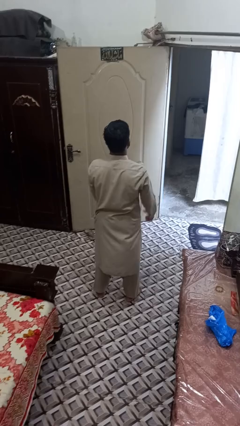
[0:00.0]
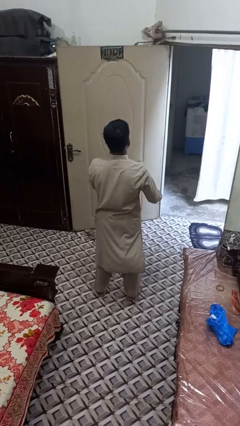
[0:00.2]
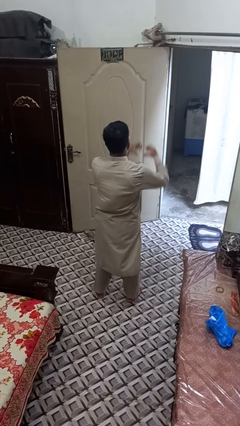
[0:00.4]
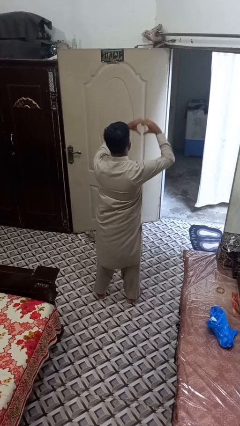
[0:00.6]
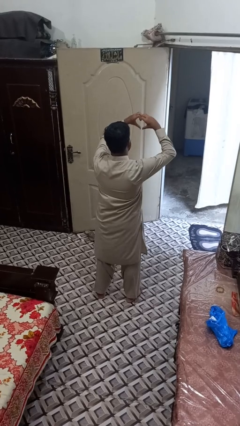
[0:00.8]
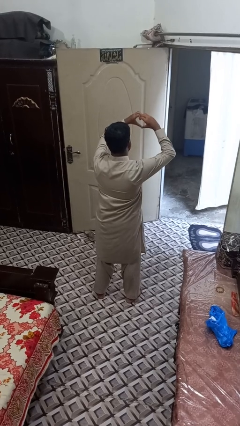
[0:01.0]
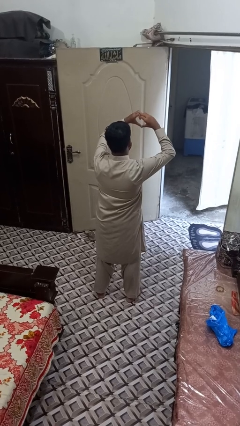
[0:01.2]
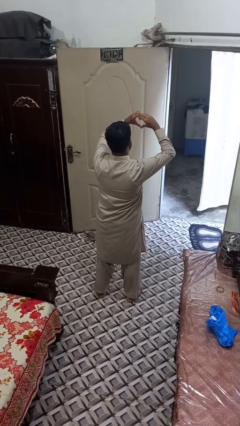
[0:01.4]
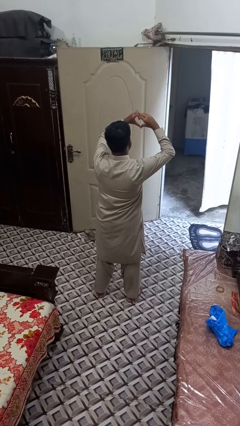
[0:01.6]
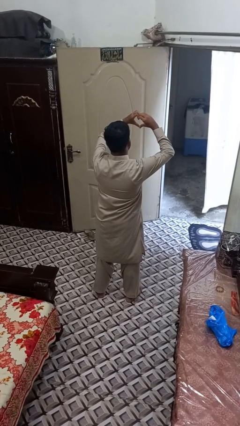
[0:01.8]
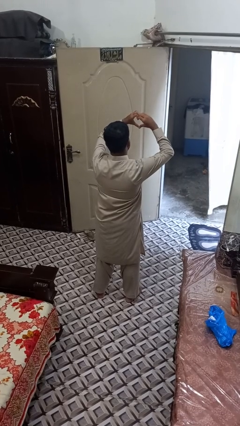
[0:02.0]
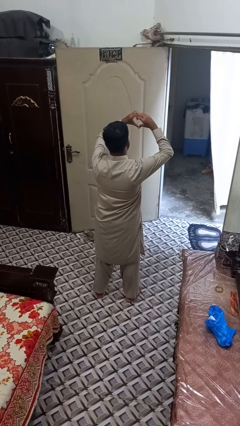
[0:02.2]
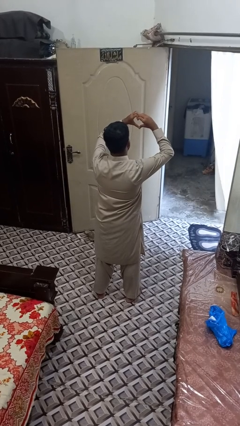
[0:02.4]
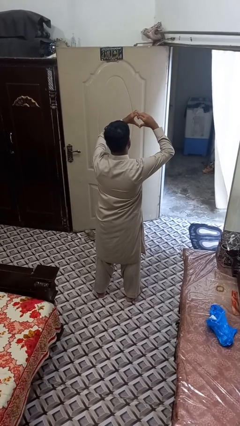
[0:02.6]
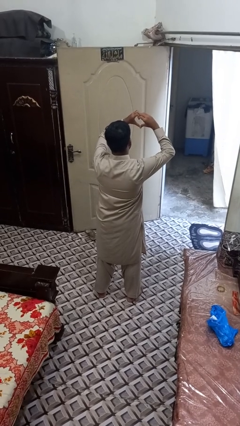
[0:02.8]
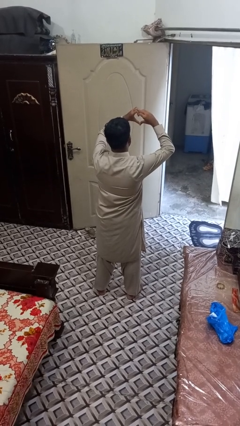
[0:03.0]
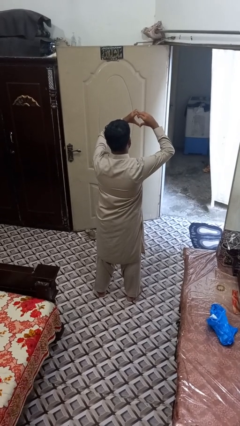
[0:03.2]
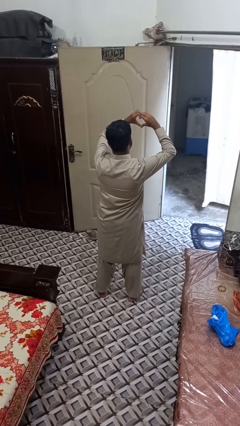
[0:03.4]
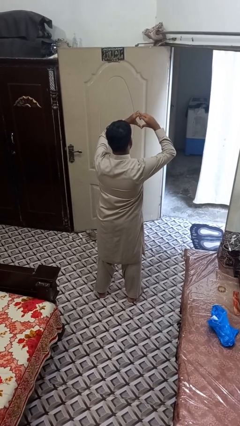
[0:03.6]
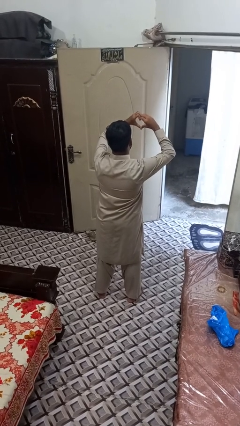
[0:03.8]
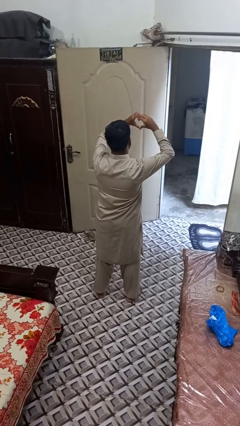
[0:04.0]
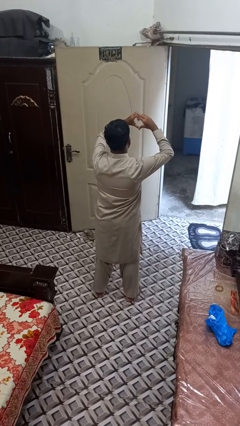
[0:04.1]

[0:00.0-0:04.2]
person gestures heart

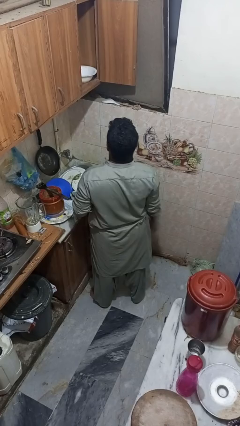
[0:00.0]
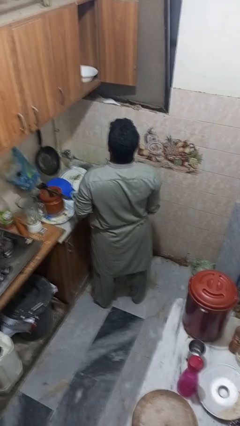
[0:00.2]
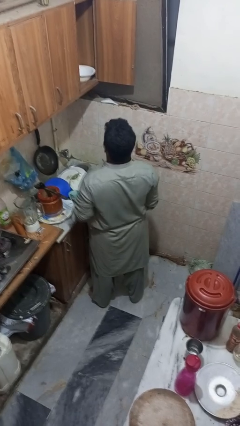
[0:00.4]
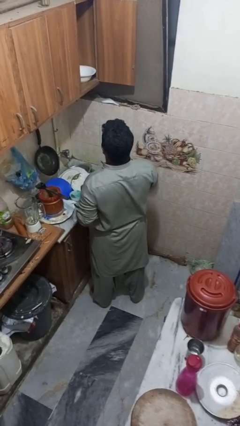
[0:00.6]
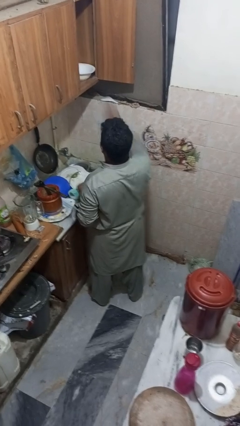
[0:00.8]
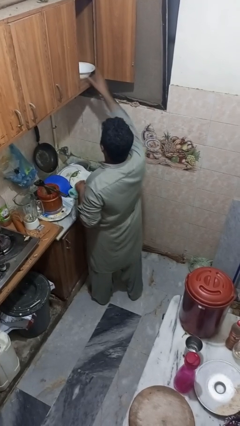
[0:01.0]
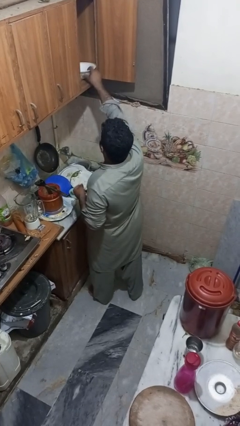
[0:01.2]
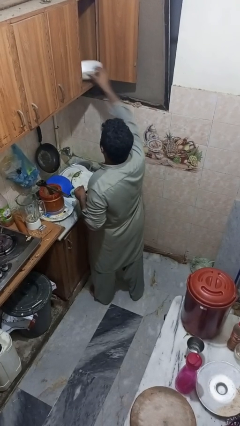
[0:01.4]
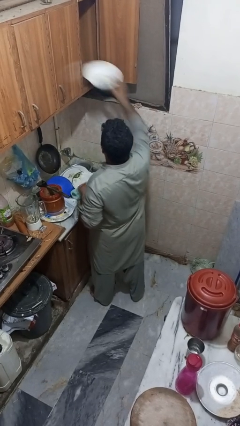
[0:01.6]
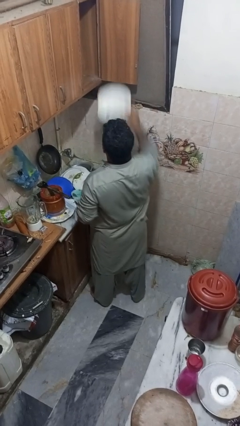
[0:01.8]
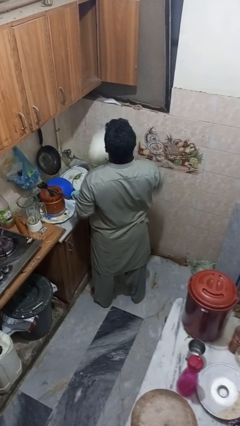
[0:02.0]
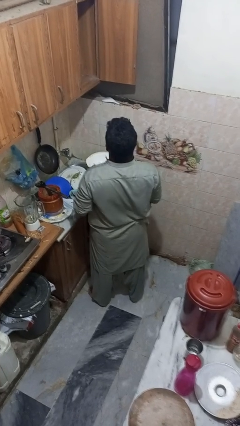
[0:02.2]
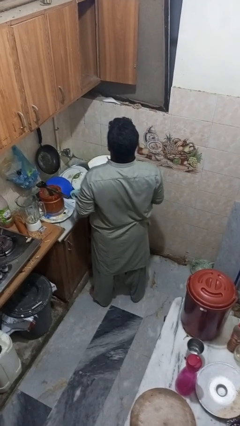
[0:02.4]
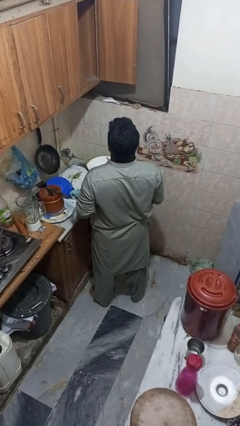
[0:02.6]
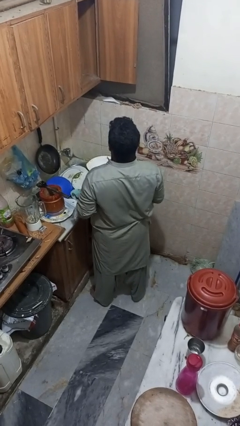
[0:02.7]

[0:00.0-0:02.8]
person takes object from cabinet

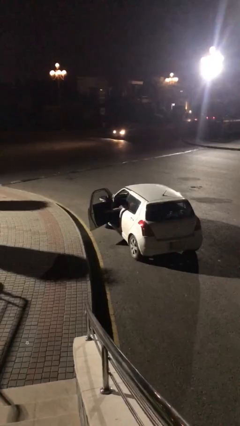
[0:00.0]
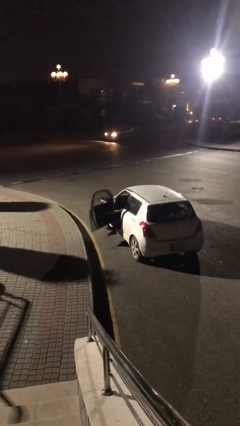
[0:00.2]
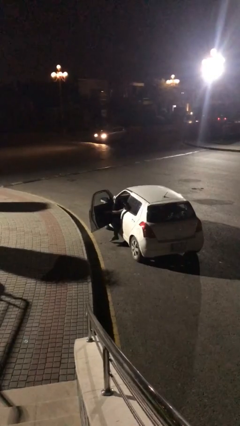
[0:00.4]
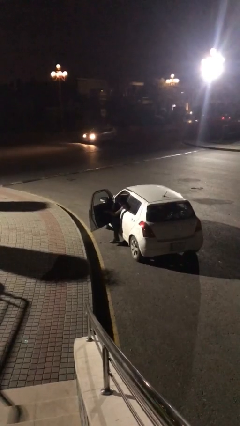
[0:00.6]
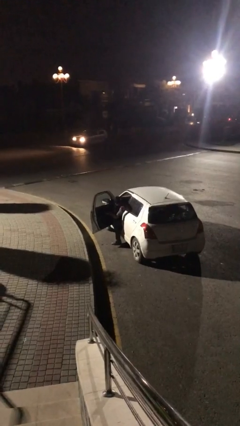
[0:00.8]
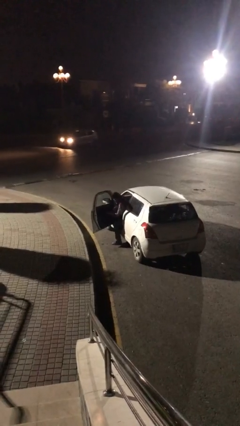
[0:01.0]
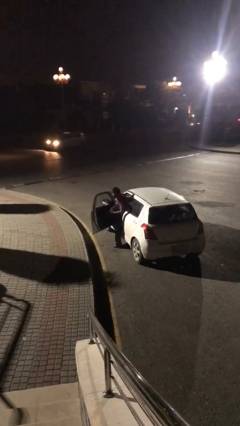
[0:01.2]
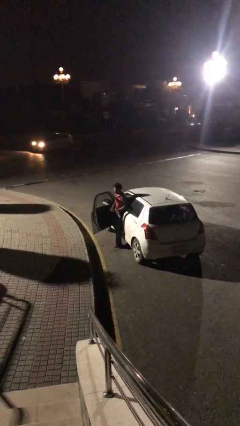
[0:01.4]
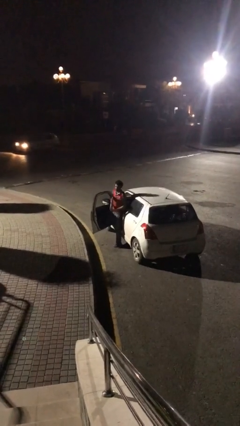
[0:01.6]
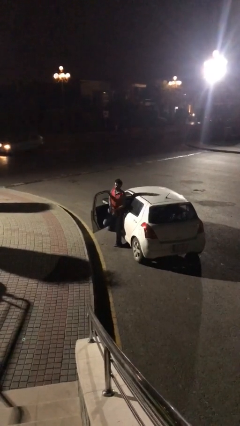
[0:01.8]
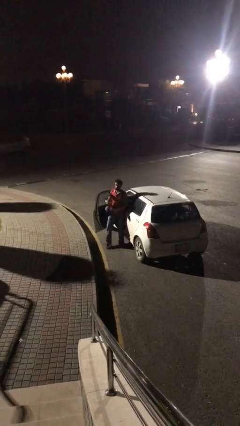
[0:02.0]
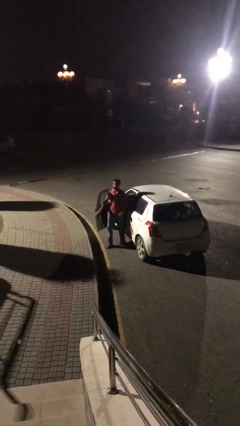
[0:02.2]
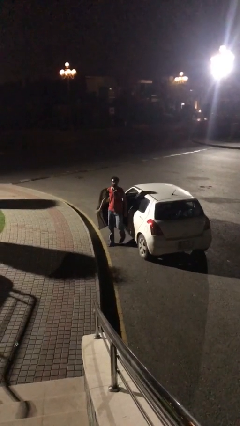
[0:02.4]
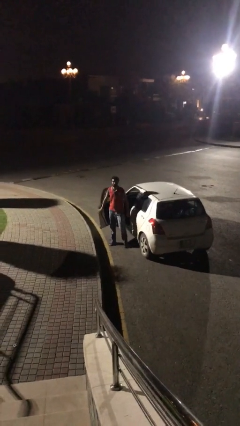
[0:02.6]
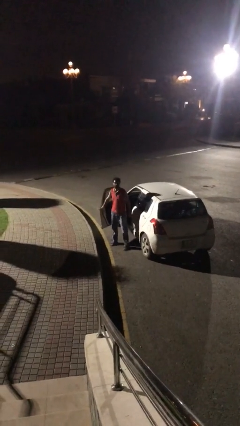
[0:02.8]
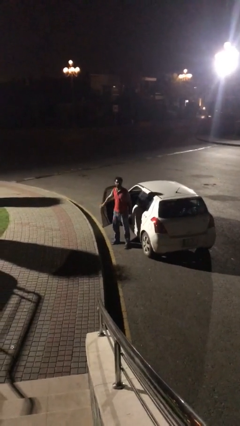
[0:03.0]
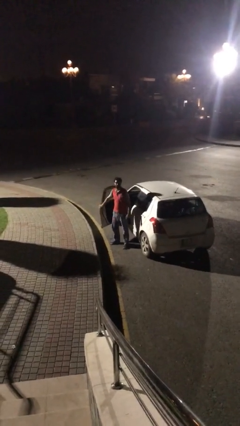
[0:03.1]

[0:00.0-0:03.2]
person exits car

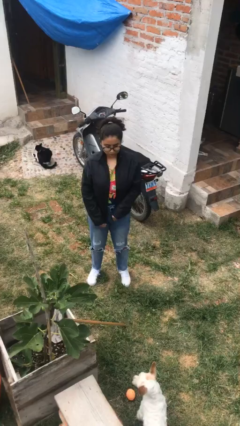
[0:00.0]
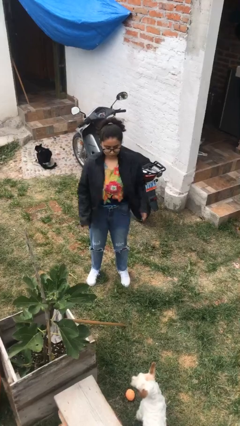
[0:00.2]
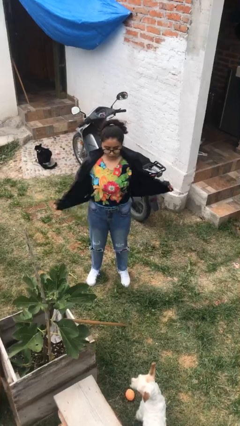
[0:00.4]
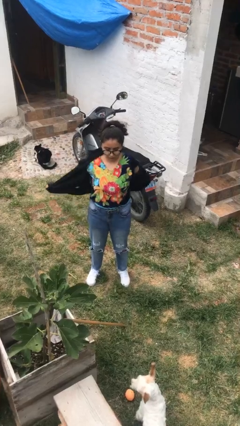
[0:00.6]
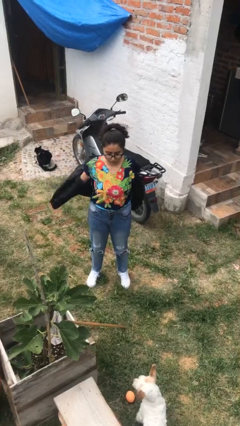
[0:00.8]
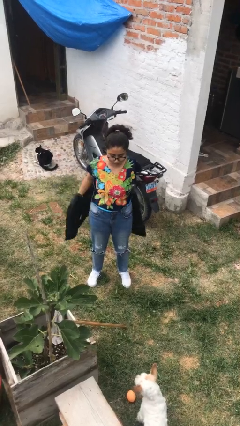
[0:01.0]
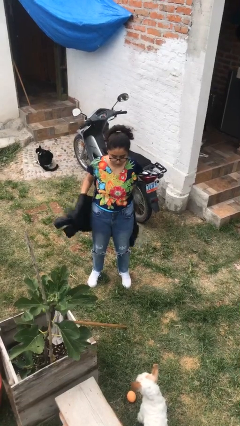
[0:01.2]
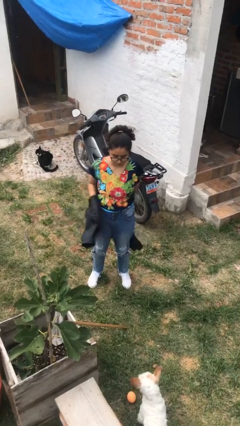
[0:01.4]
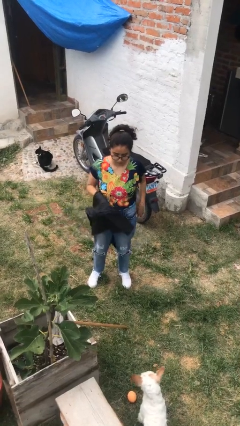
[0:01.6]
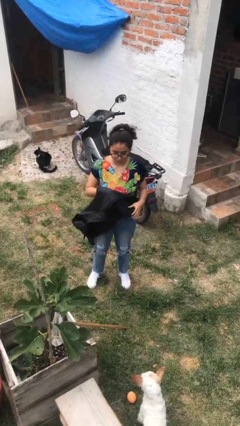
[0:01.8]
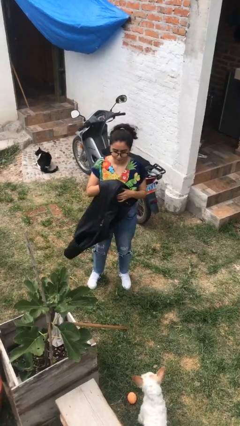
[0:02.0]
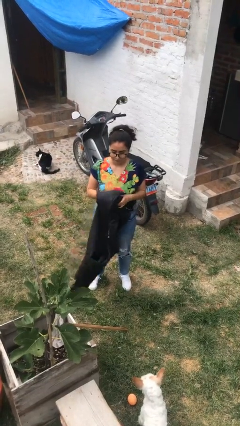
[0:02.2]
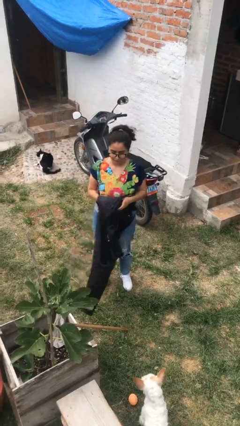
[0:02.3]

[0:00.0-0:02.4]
person takes off jacket

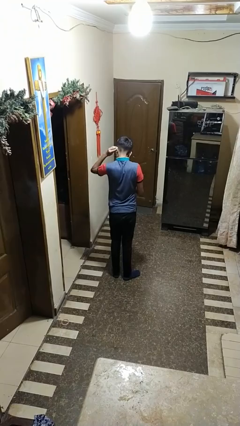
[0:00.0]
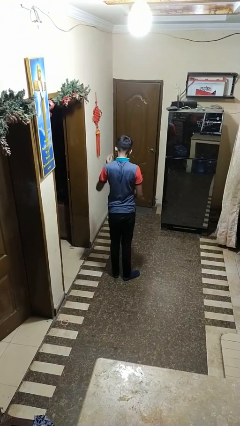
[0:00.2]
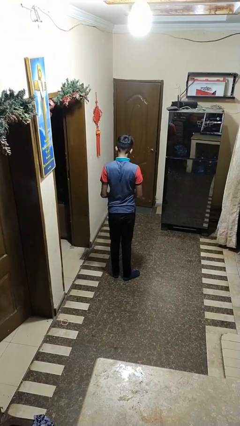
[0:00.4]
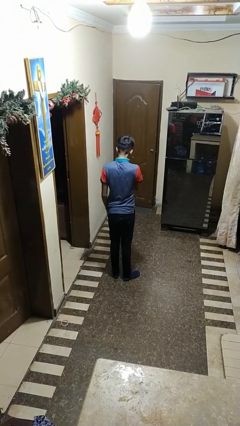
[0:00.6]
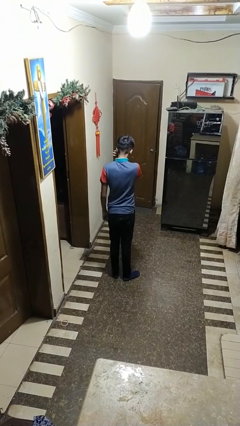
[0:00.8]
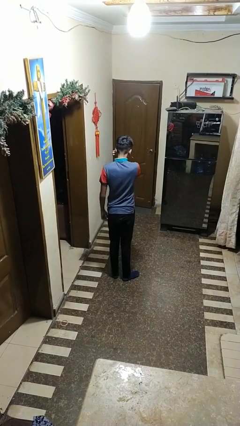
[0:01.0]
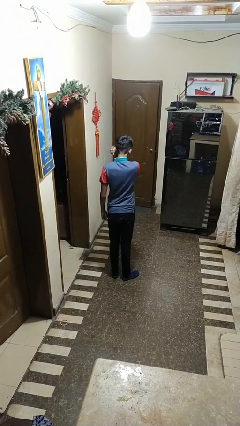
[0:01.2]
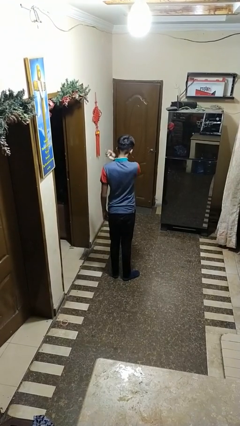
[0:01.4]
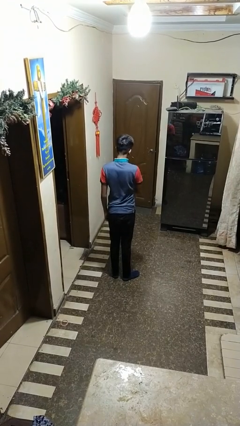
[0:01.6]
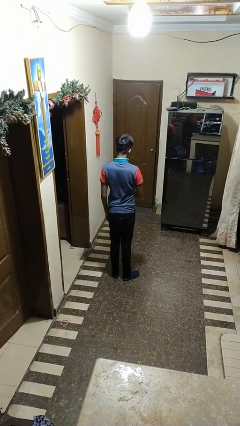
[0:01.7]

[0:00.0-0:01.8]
person takes off earrings

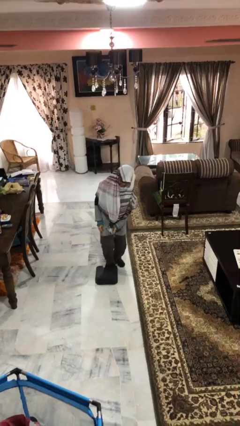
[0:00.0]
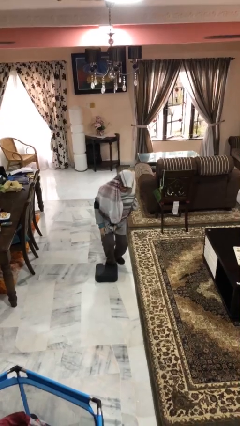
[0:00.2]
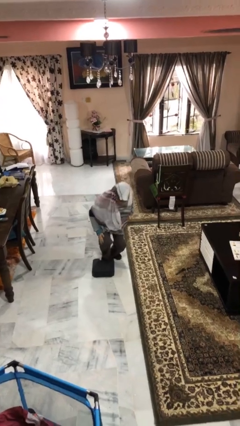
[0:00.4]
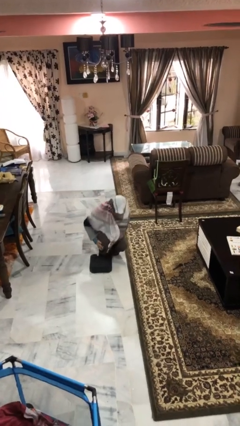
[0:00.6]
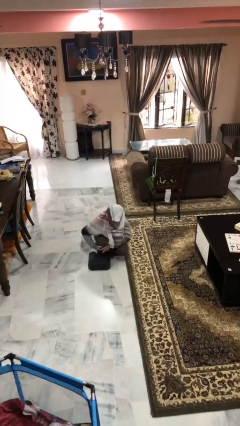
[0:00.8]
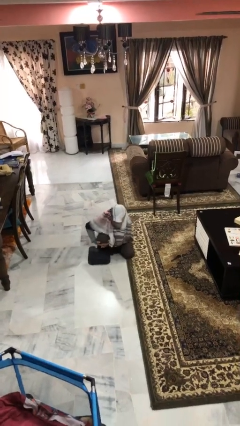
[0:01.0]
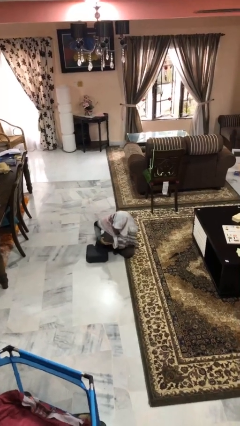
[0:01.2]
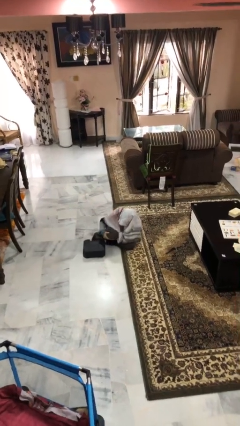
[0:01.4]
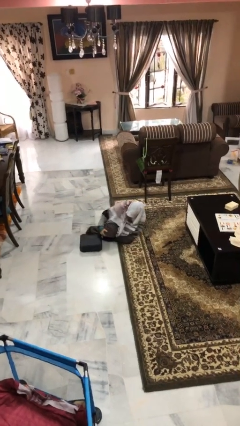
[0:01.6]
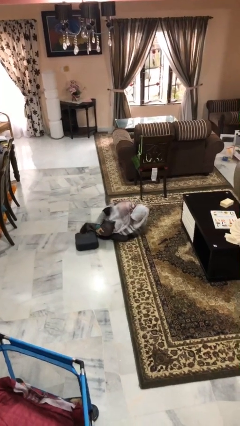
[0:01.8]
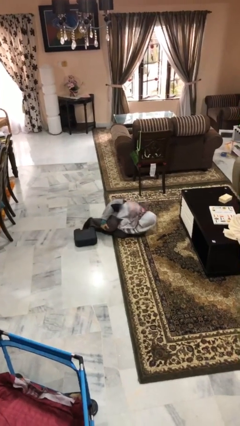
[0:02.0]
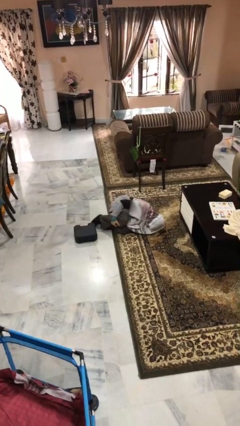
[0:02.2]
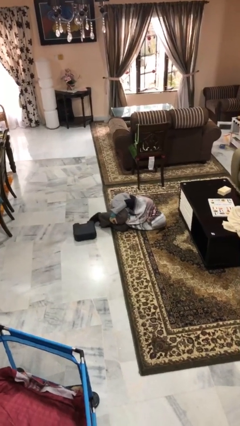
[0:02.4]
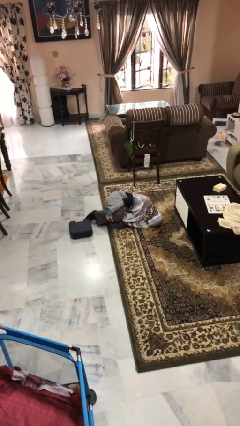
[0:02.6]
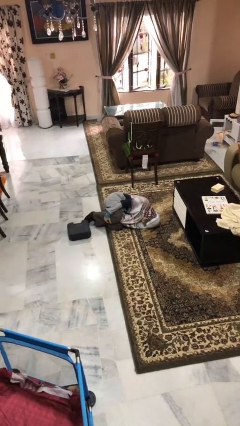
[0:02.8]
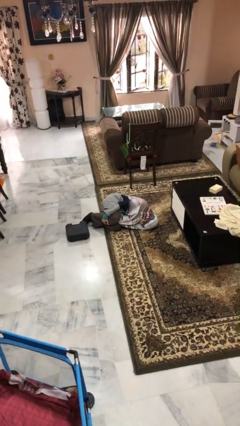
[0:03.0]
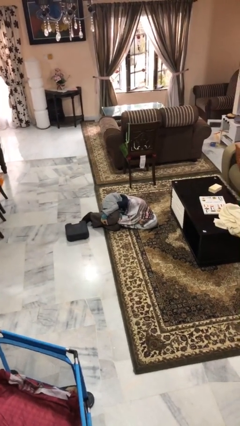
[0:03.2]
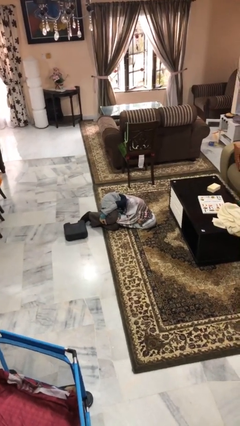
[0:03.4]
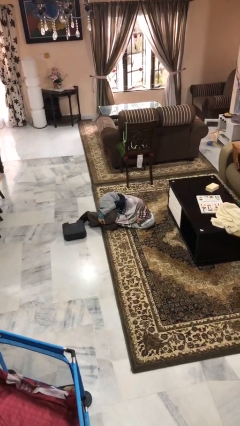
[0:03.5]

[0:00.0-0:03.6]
person lies down on floor
